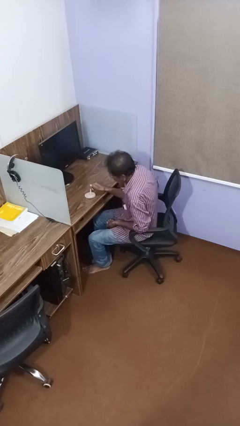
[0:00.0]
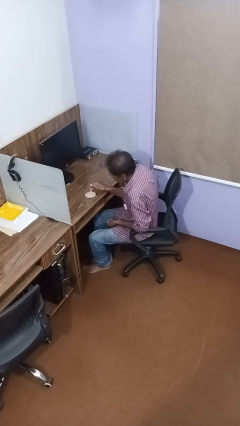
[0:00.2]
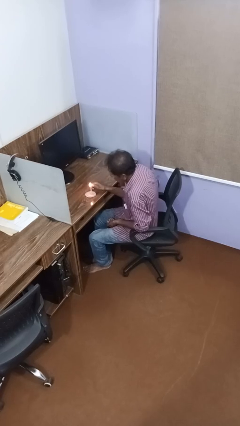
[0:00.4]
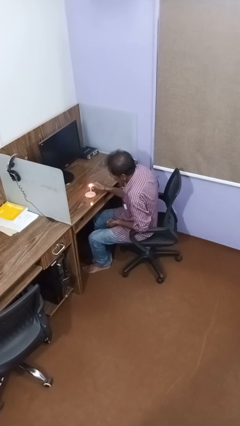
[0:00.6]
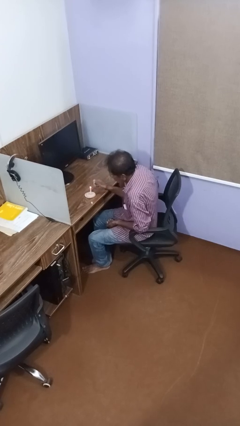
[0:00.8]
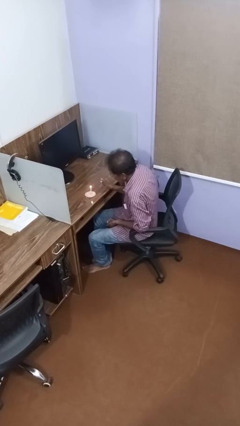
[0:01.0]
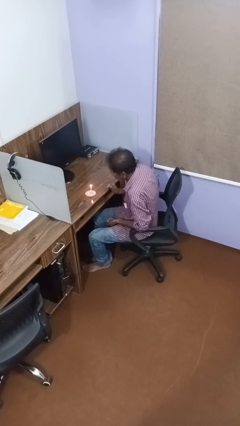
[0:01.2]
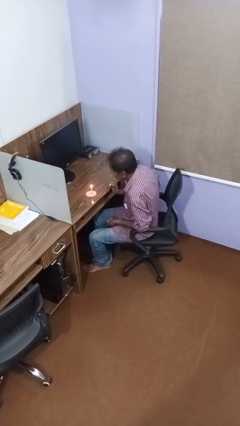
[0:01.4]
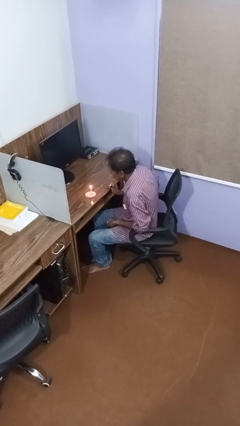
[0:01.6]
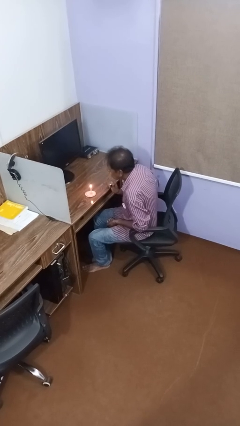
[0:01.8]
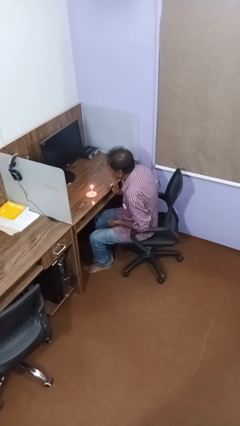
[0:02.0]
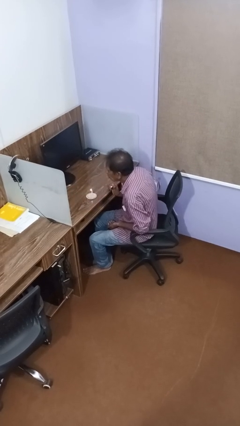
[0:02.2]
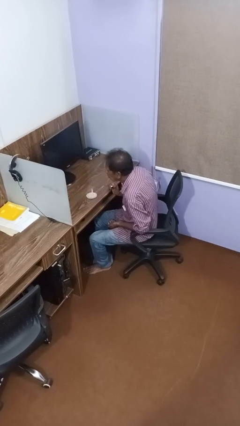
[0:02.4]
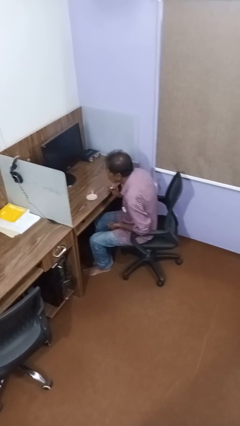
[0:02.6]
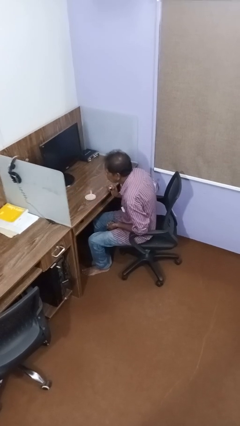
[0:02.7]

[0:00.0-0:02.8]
person lights candle

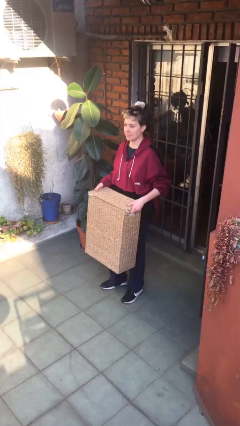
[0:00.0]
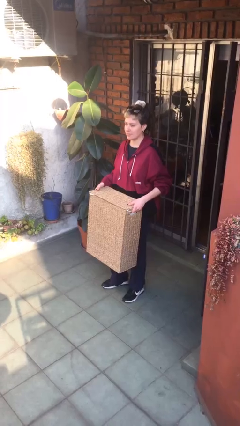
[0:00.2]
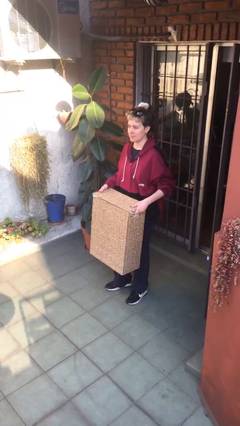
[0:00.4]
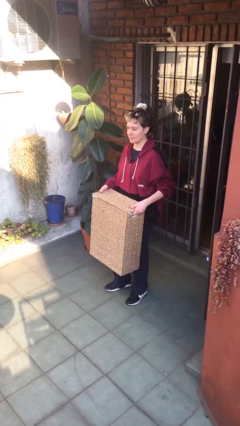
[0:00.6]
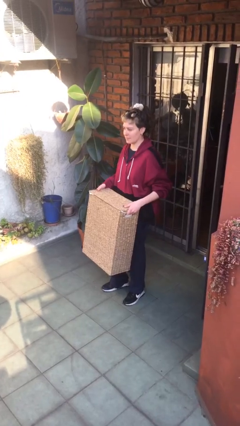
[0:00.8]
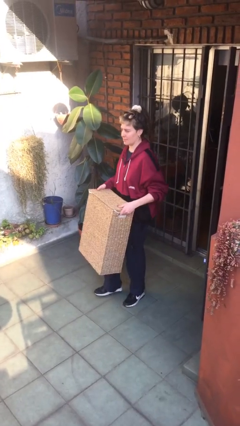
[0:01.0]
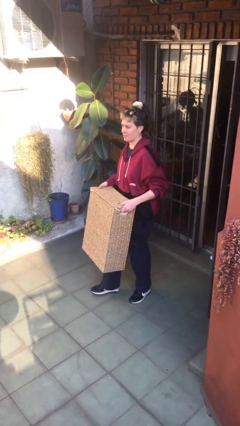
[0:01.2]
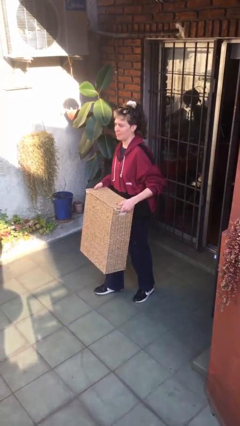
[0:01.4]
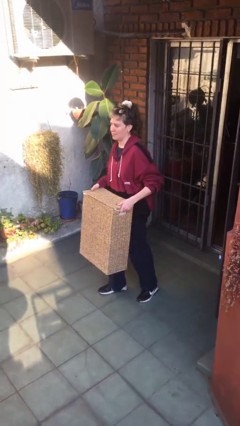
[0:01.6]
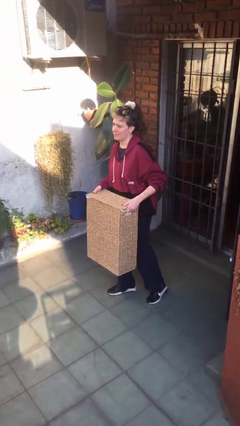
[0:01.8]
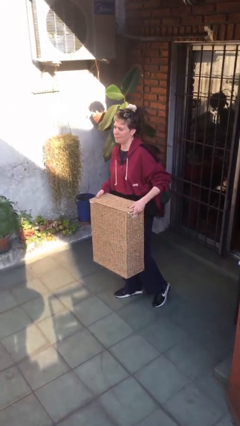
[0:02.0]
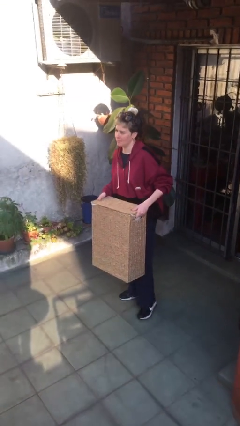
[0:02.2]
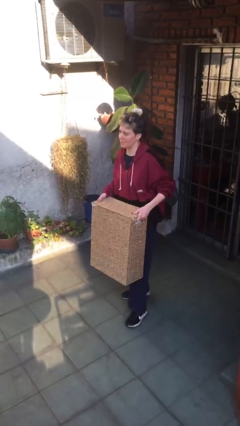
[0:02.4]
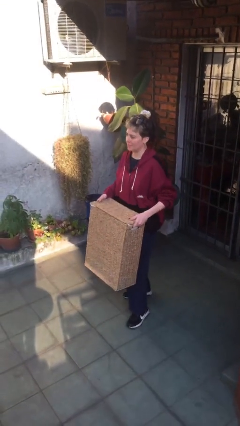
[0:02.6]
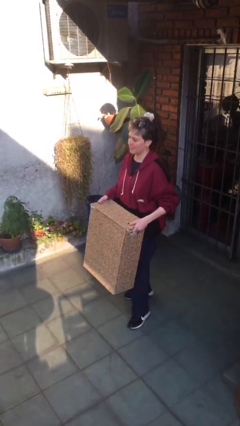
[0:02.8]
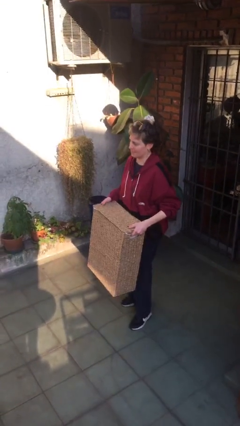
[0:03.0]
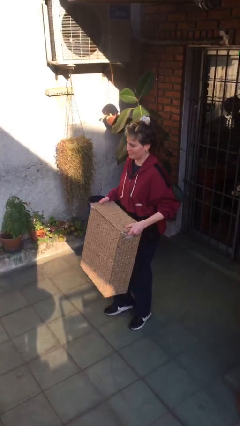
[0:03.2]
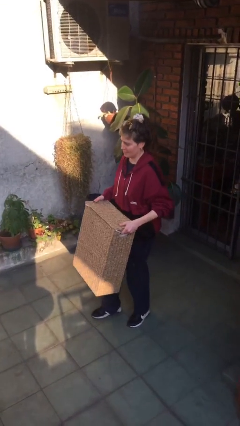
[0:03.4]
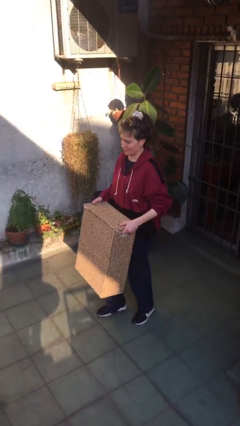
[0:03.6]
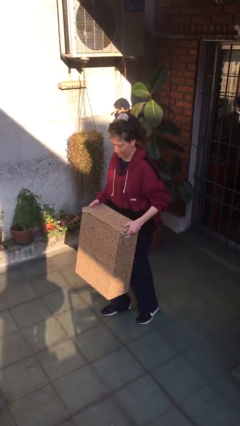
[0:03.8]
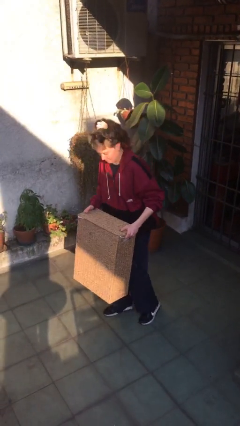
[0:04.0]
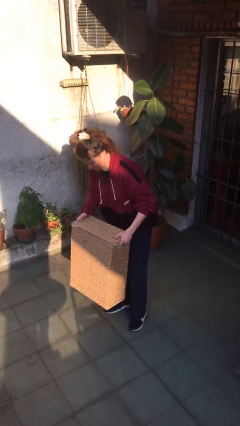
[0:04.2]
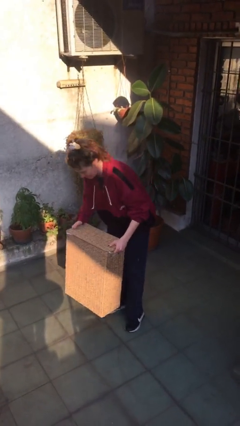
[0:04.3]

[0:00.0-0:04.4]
person carries heavy object

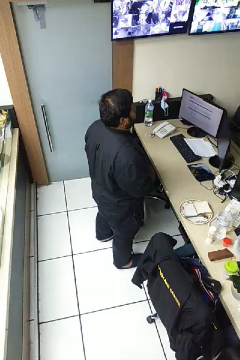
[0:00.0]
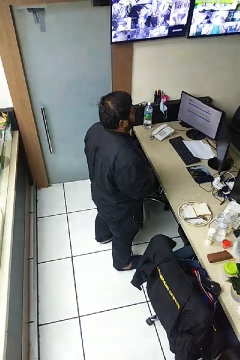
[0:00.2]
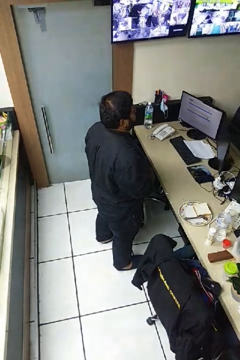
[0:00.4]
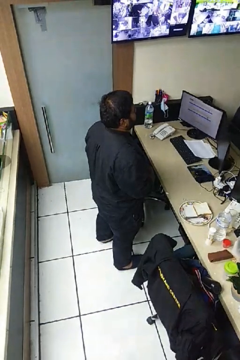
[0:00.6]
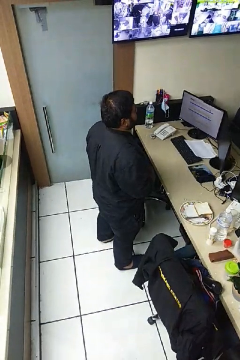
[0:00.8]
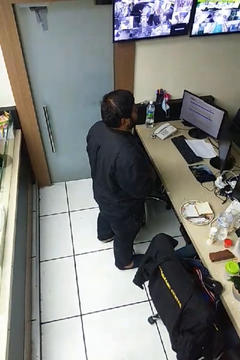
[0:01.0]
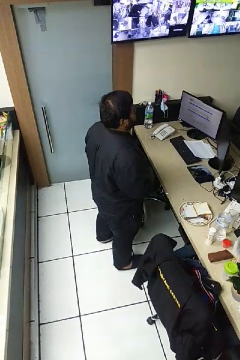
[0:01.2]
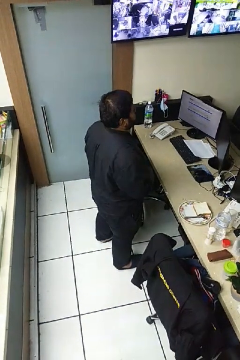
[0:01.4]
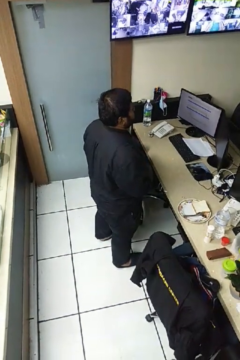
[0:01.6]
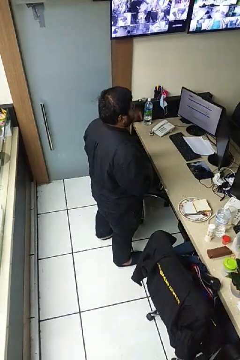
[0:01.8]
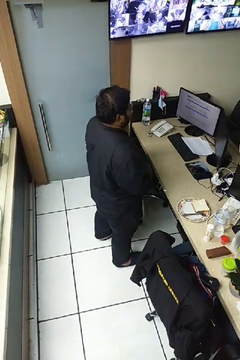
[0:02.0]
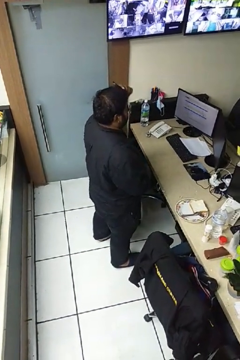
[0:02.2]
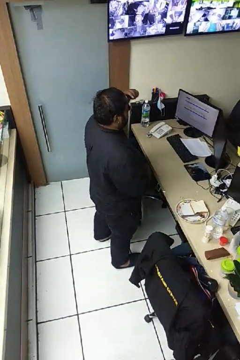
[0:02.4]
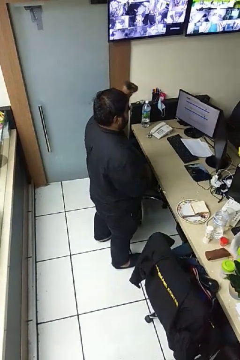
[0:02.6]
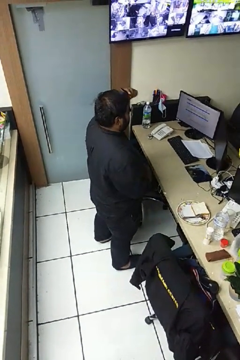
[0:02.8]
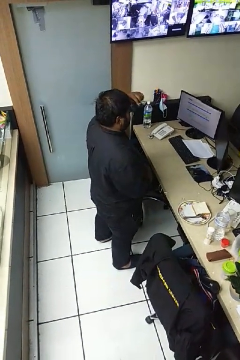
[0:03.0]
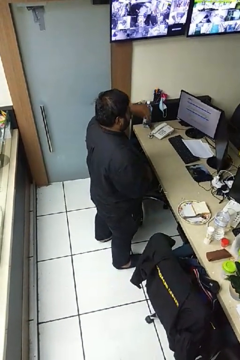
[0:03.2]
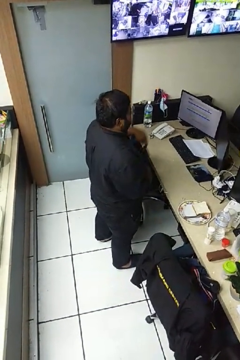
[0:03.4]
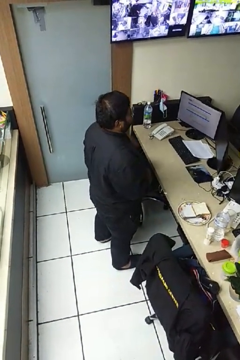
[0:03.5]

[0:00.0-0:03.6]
person brushes hair

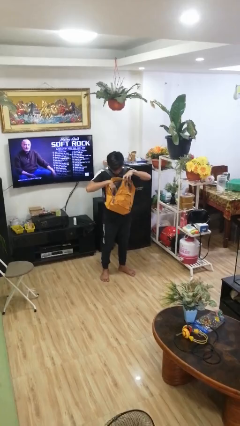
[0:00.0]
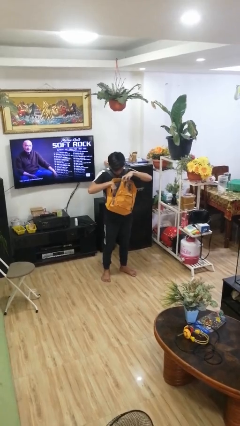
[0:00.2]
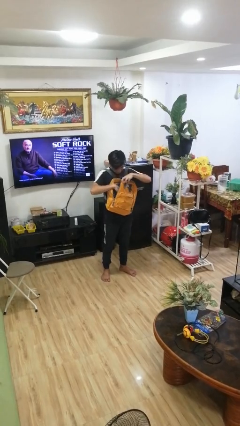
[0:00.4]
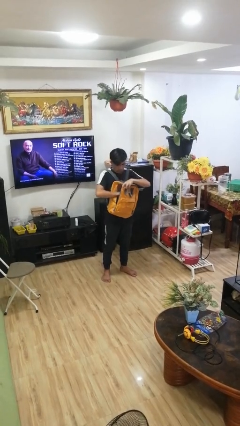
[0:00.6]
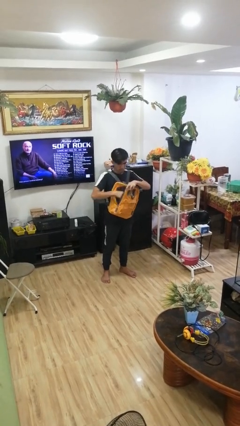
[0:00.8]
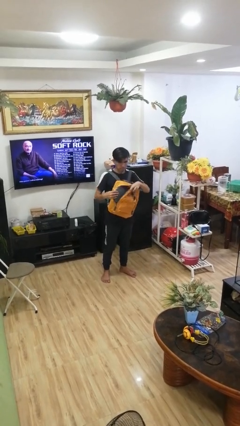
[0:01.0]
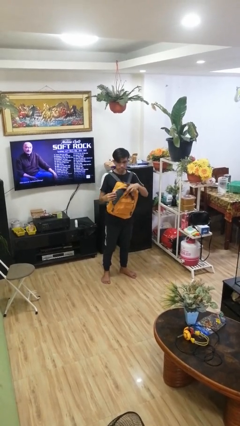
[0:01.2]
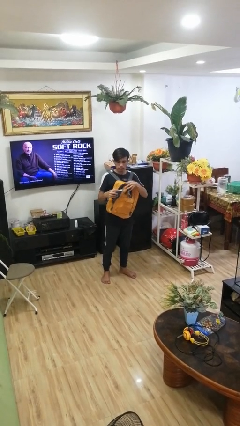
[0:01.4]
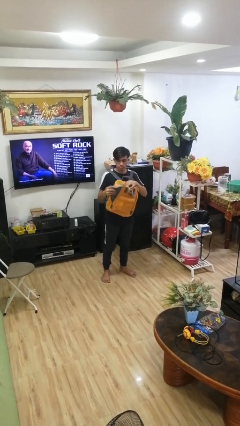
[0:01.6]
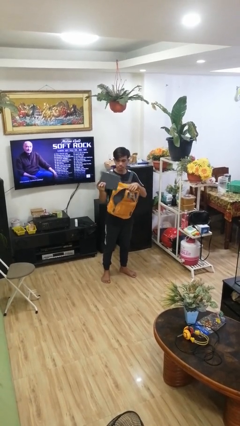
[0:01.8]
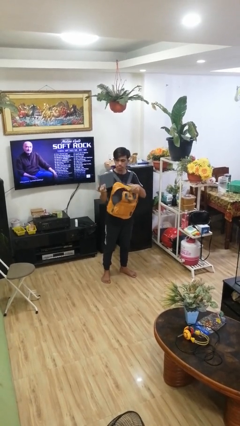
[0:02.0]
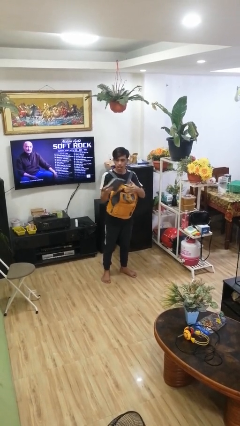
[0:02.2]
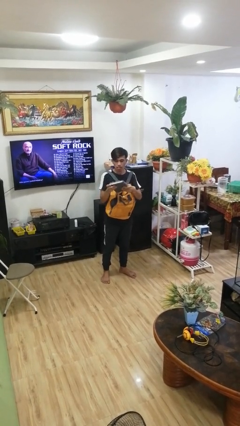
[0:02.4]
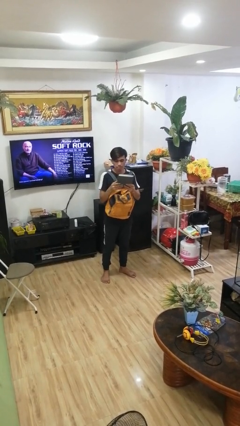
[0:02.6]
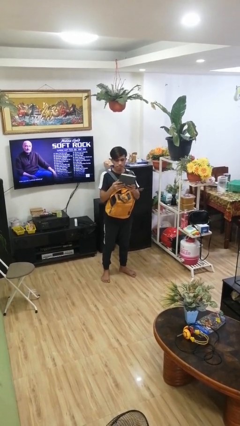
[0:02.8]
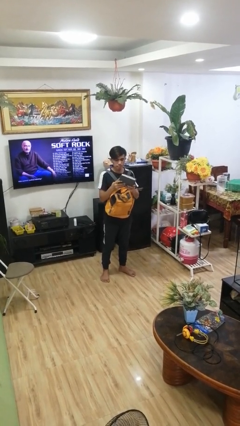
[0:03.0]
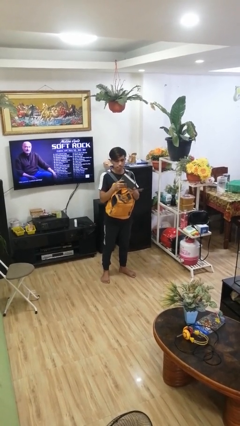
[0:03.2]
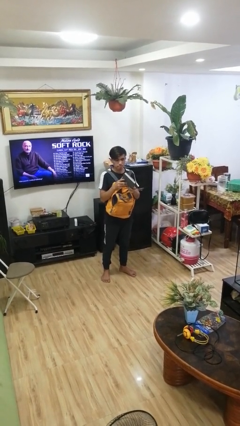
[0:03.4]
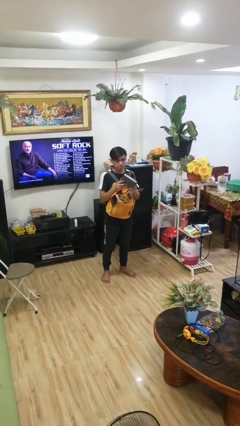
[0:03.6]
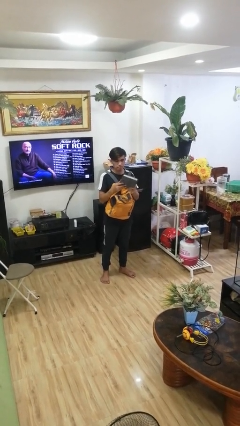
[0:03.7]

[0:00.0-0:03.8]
person takes object from backpack

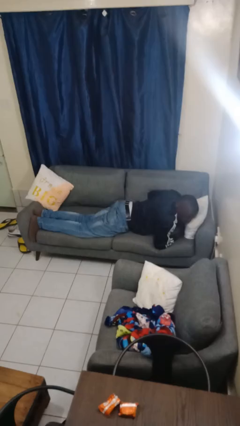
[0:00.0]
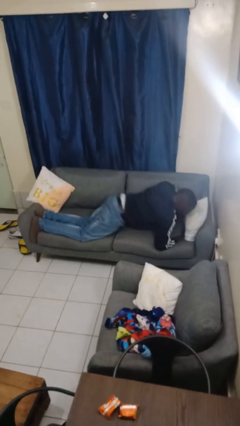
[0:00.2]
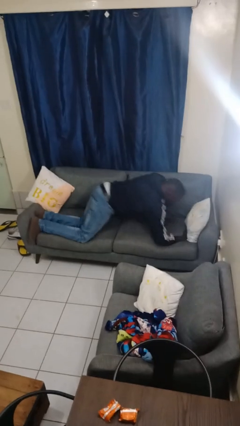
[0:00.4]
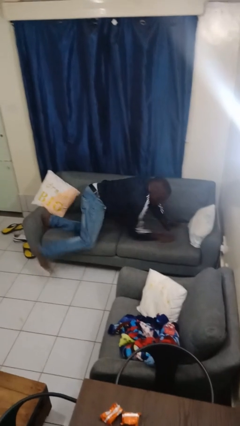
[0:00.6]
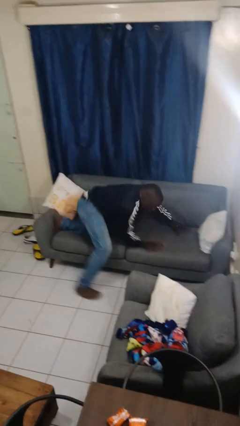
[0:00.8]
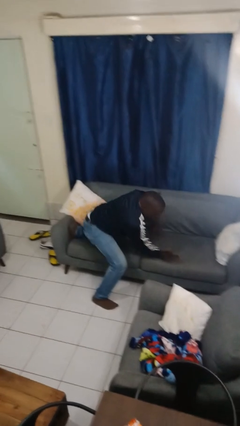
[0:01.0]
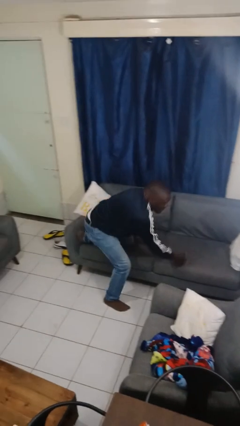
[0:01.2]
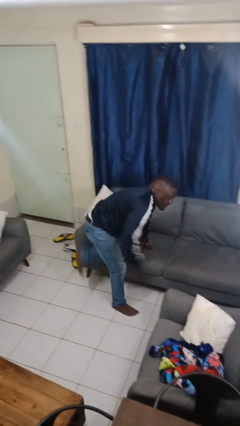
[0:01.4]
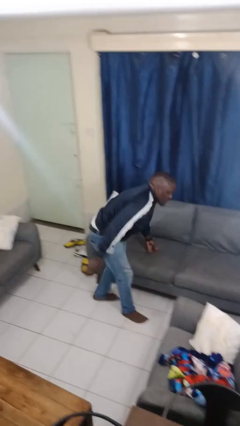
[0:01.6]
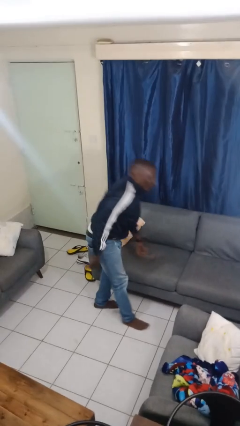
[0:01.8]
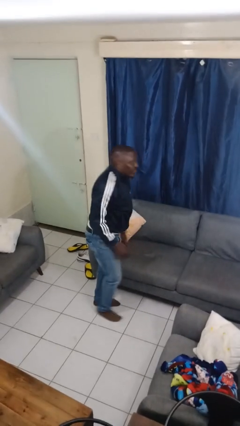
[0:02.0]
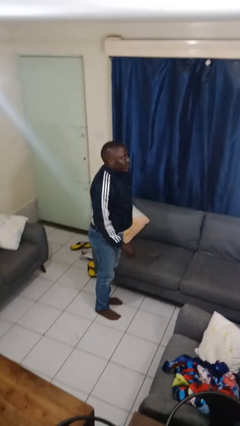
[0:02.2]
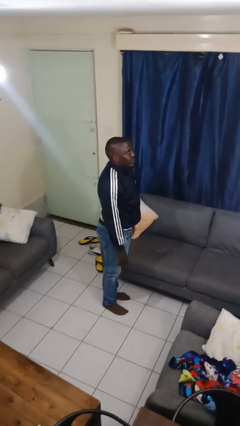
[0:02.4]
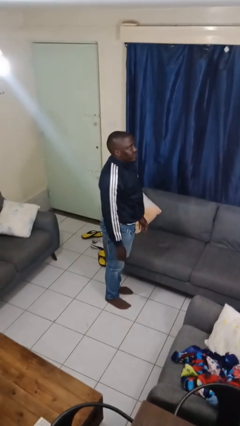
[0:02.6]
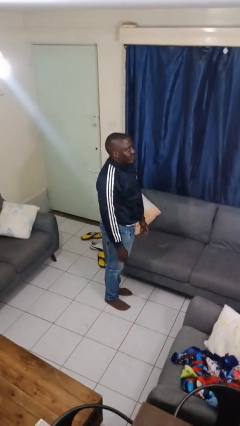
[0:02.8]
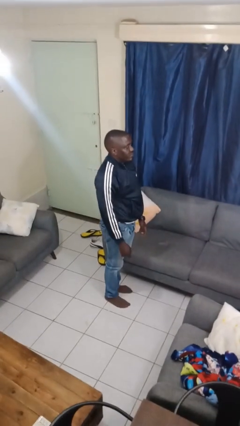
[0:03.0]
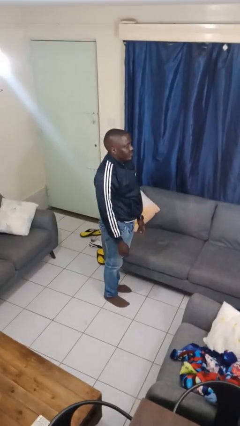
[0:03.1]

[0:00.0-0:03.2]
person stands up
